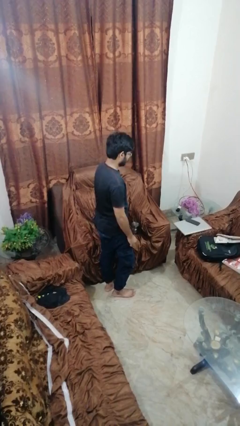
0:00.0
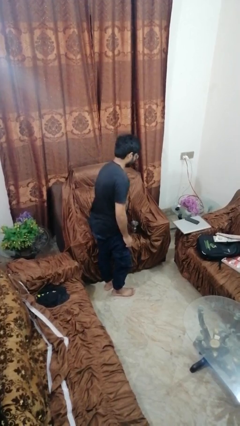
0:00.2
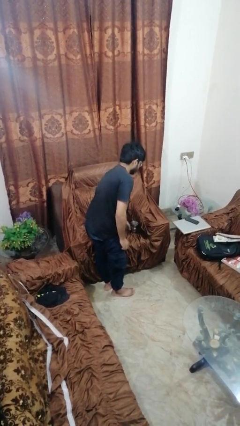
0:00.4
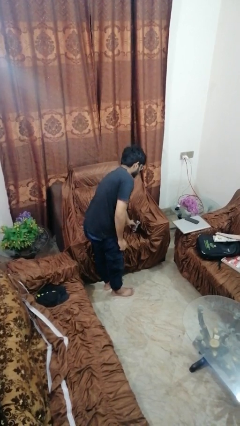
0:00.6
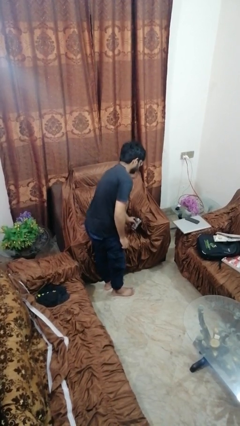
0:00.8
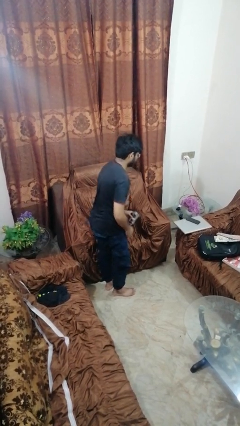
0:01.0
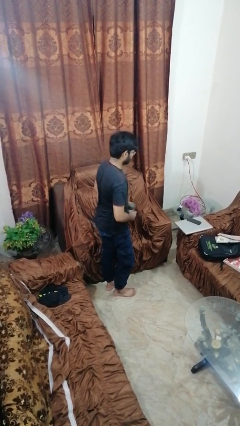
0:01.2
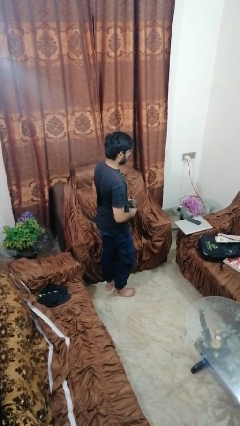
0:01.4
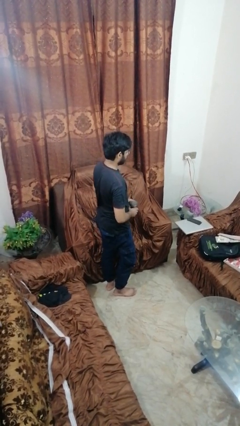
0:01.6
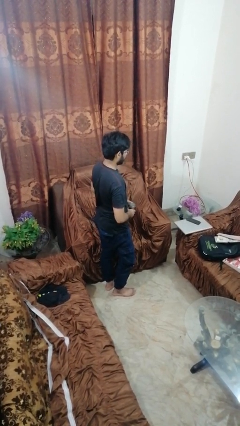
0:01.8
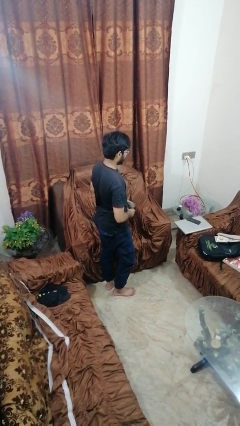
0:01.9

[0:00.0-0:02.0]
person picks up object from couch

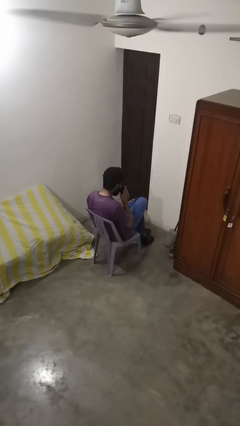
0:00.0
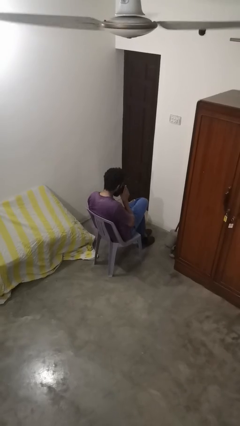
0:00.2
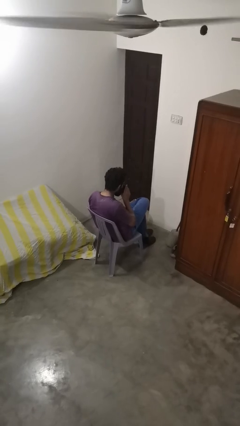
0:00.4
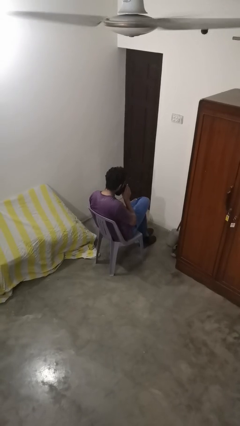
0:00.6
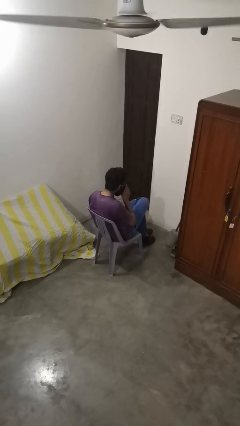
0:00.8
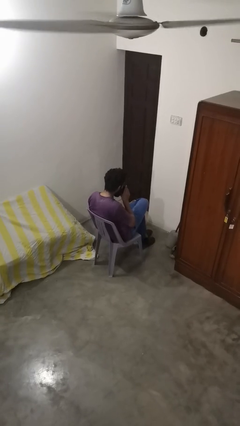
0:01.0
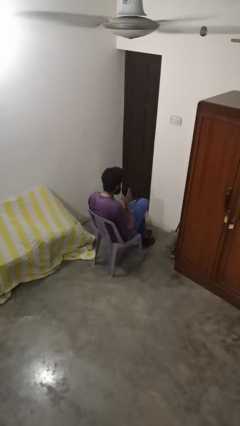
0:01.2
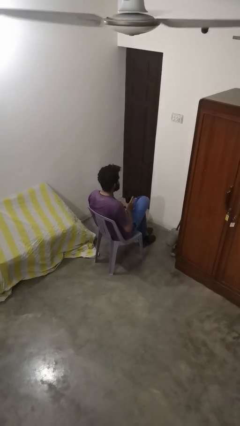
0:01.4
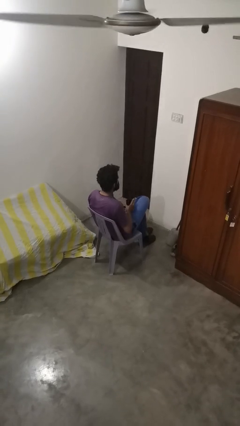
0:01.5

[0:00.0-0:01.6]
person drinks from straw

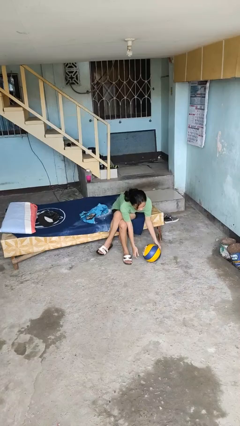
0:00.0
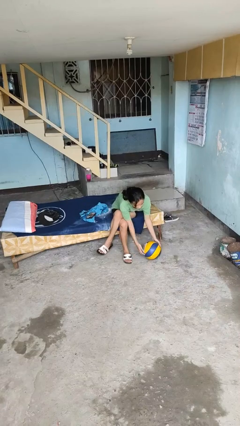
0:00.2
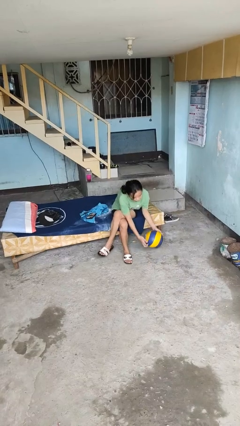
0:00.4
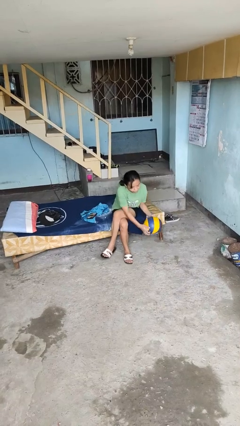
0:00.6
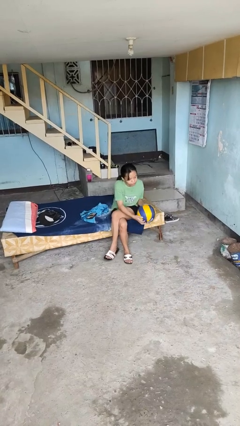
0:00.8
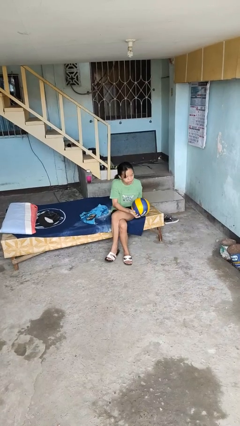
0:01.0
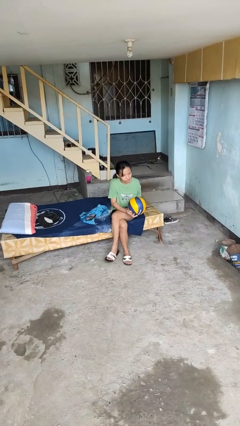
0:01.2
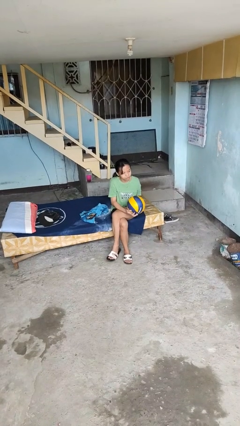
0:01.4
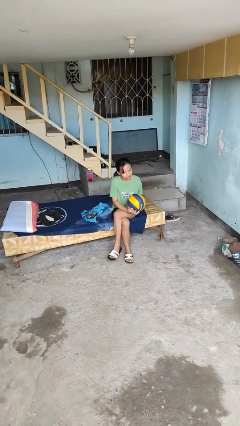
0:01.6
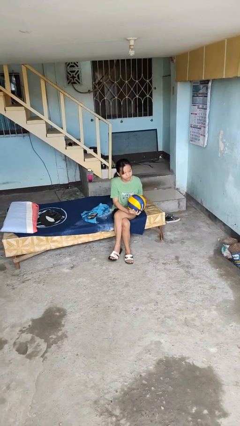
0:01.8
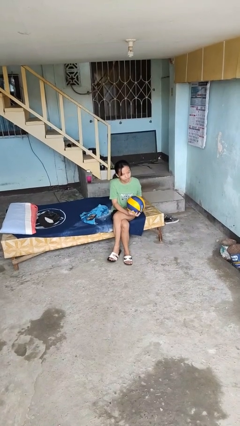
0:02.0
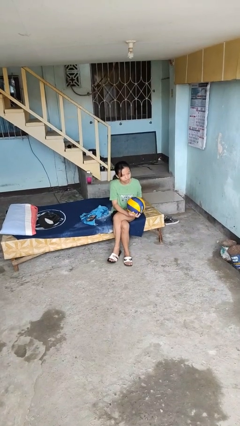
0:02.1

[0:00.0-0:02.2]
person picks up object from floor

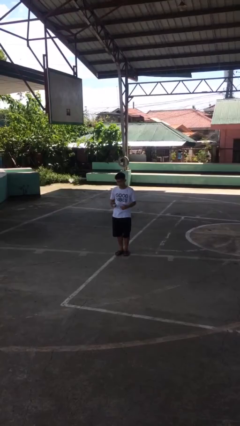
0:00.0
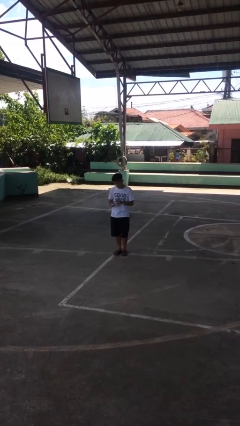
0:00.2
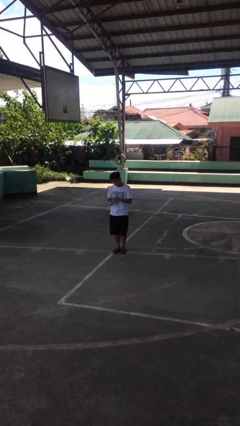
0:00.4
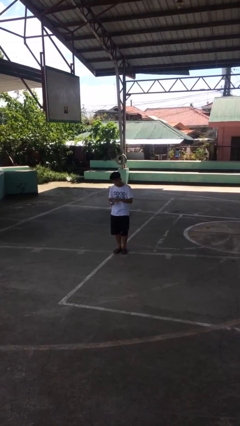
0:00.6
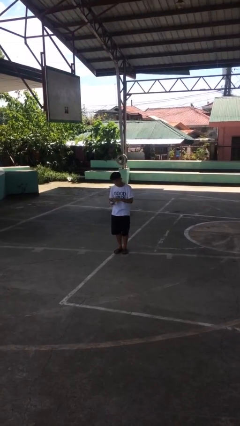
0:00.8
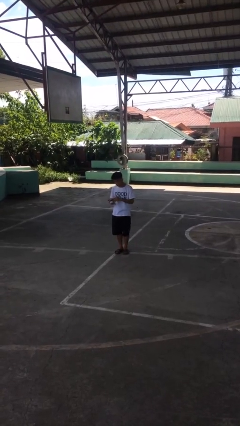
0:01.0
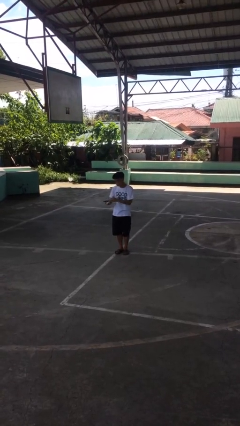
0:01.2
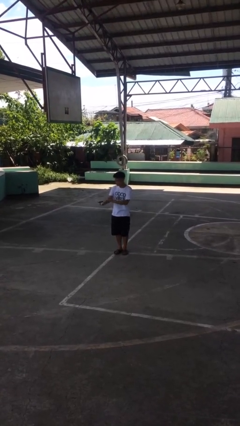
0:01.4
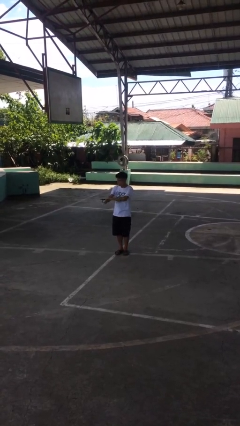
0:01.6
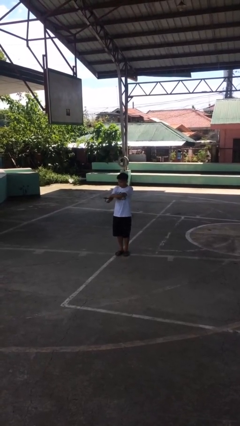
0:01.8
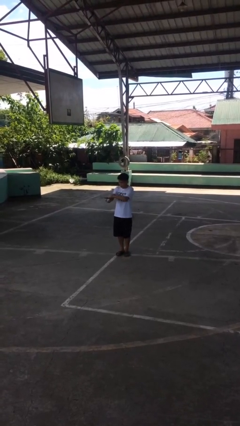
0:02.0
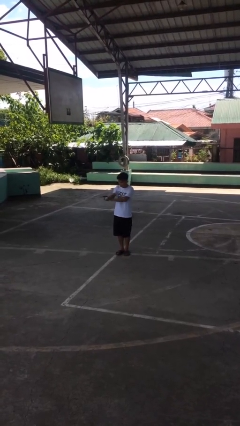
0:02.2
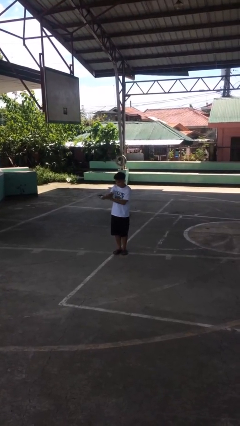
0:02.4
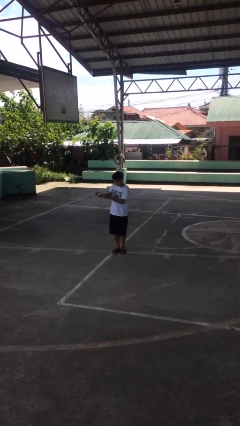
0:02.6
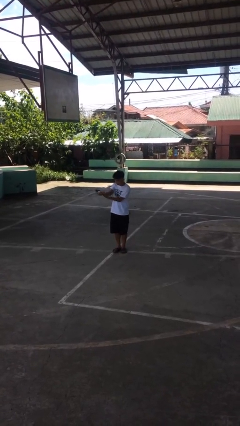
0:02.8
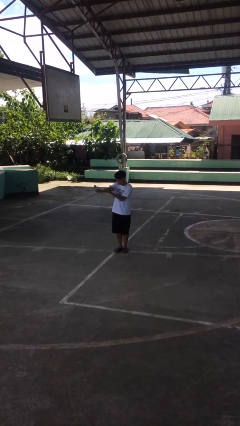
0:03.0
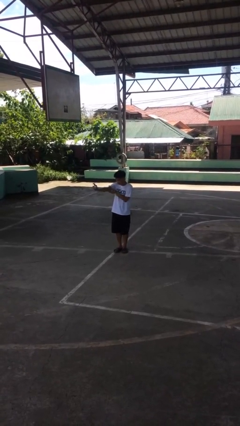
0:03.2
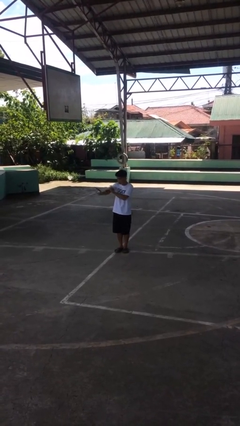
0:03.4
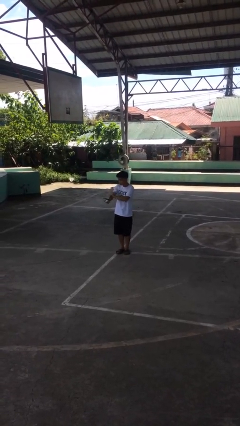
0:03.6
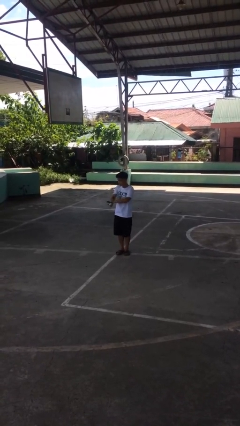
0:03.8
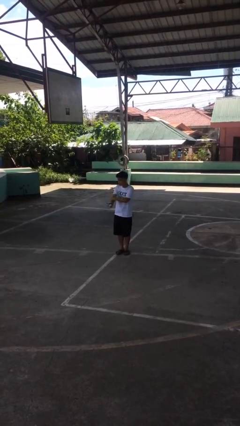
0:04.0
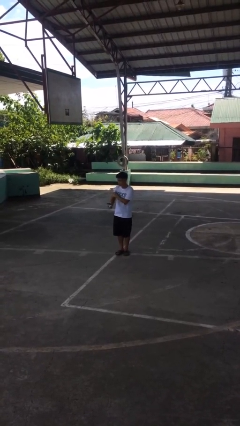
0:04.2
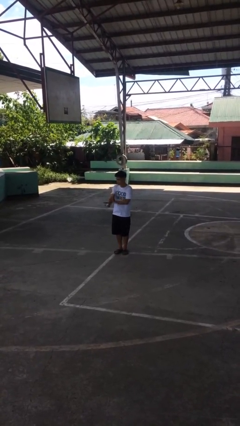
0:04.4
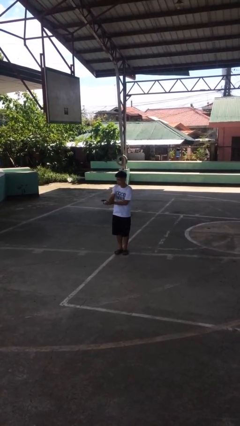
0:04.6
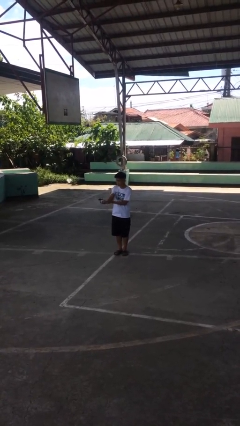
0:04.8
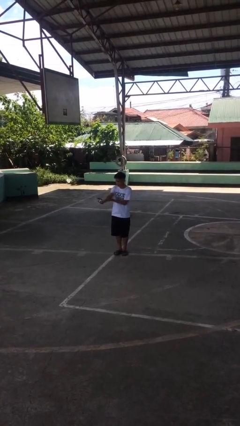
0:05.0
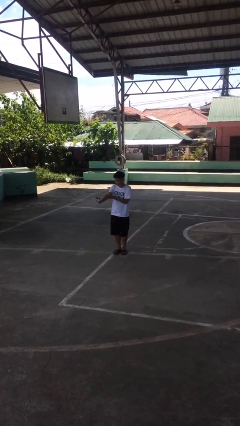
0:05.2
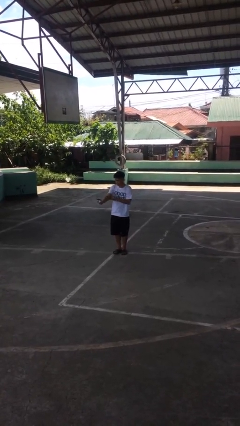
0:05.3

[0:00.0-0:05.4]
person applies sunscreen

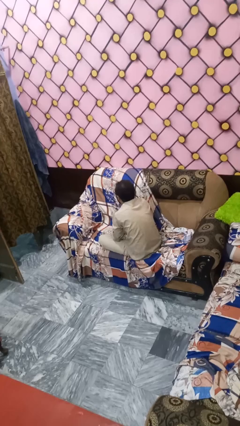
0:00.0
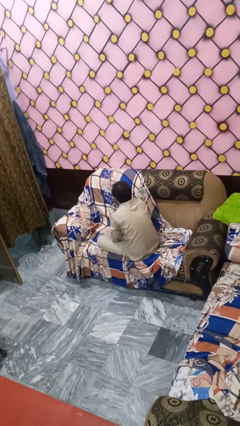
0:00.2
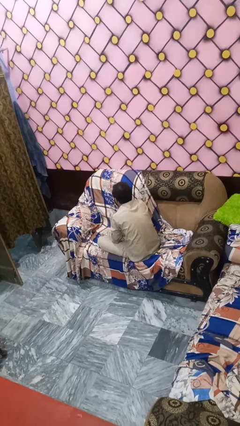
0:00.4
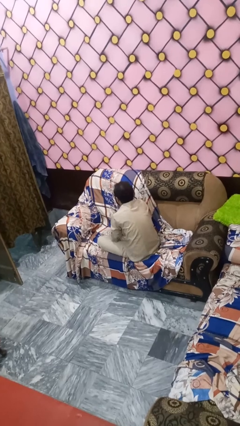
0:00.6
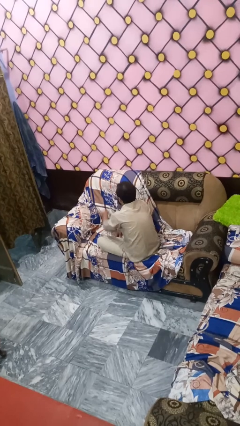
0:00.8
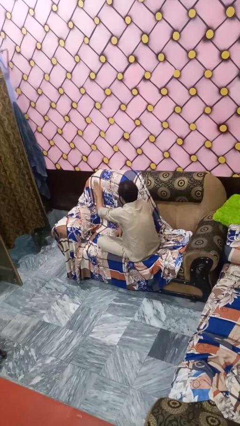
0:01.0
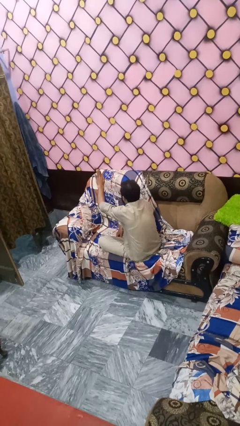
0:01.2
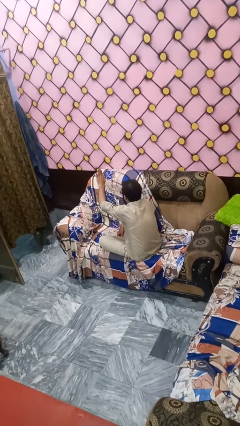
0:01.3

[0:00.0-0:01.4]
person gestures stop

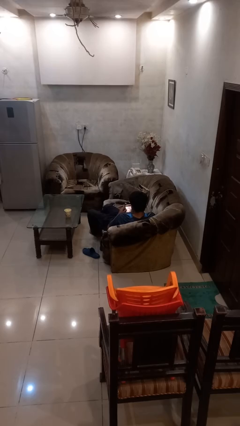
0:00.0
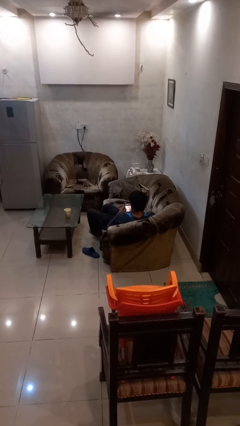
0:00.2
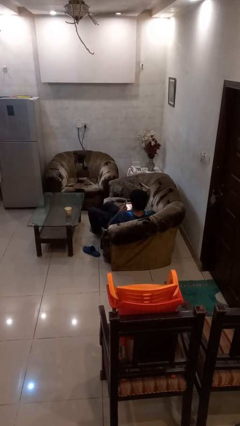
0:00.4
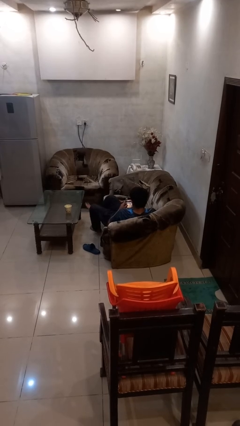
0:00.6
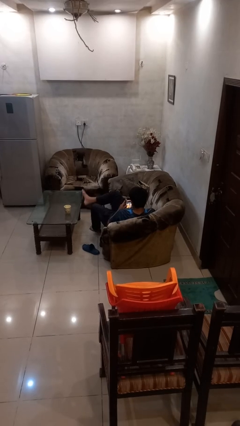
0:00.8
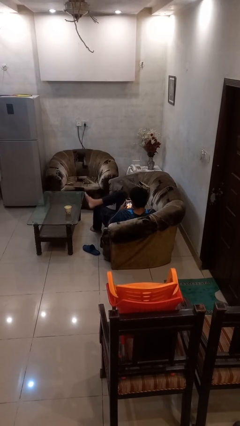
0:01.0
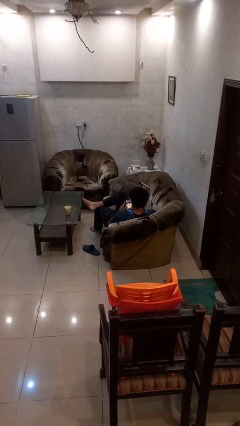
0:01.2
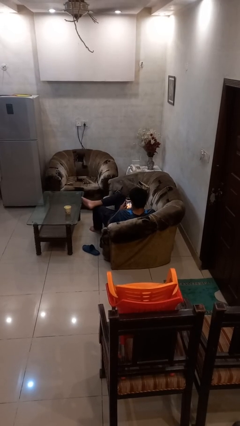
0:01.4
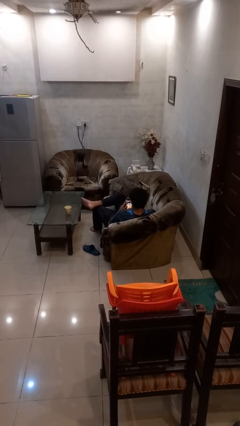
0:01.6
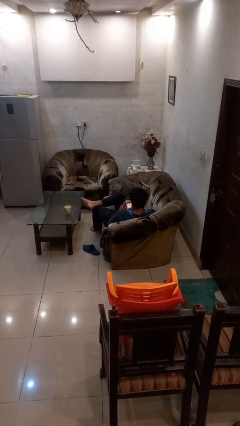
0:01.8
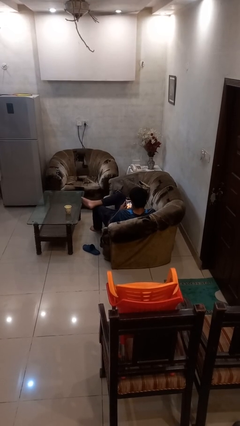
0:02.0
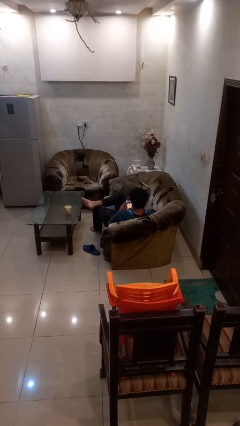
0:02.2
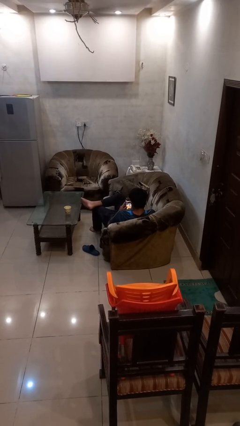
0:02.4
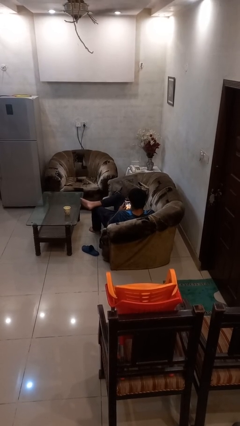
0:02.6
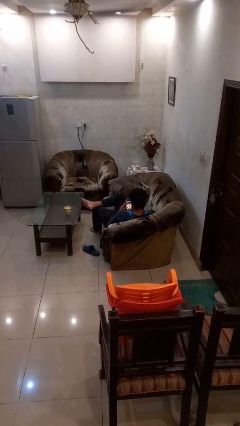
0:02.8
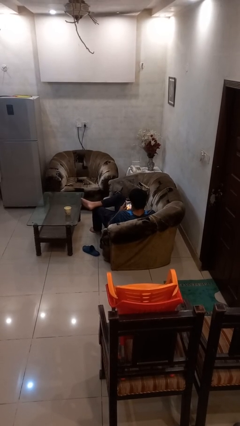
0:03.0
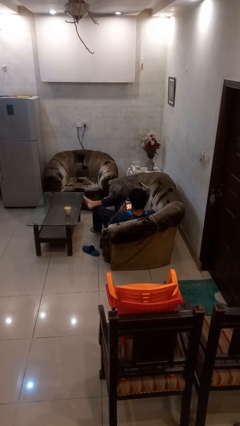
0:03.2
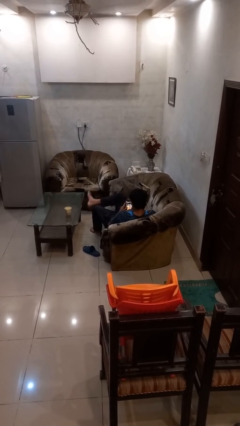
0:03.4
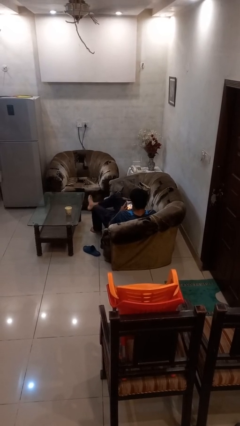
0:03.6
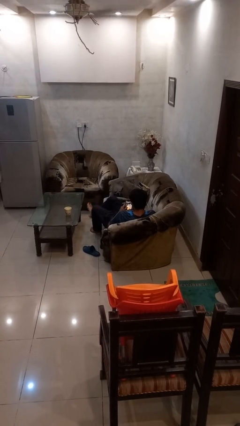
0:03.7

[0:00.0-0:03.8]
person crosses legs

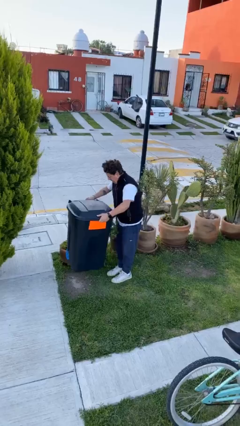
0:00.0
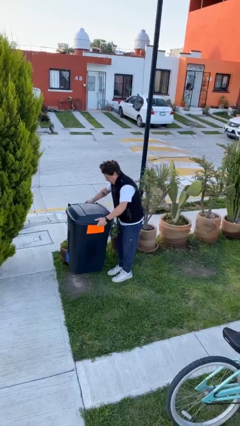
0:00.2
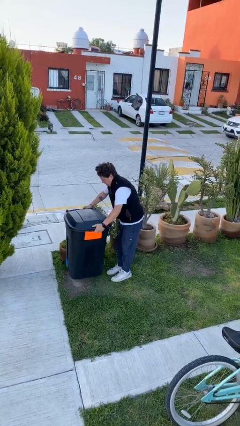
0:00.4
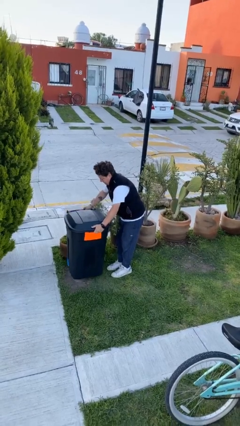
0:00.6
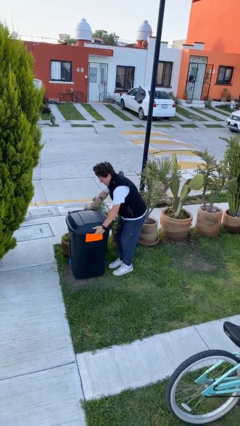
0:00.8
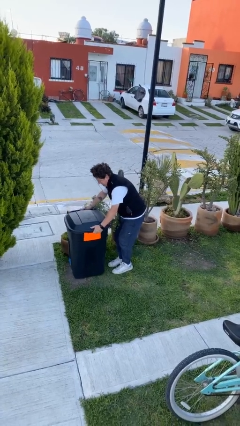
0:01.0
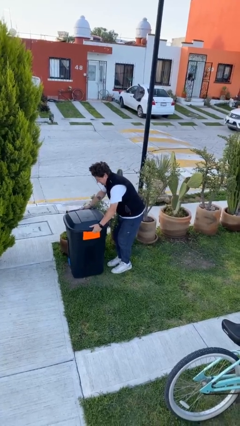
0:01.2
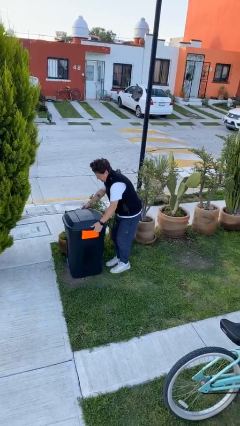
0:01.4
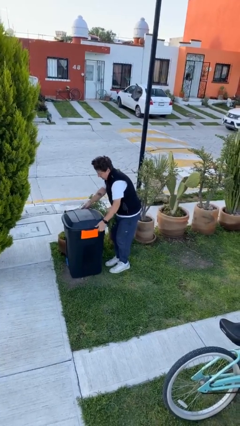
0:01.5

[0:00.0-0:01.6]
person puts down object on floor
